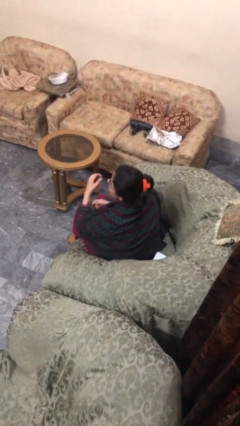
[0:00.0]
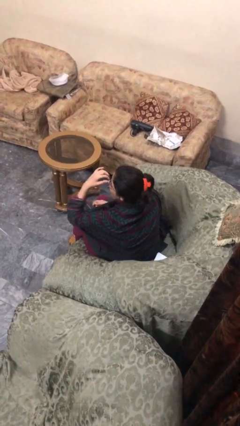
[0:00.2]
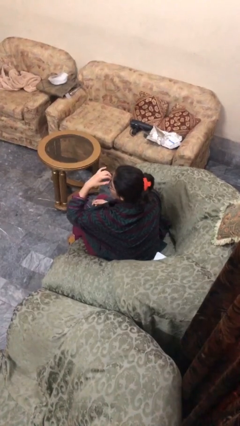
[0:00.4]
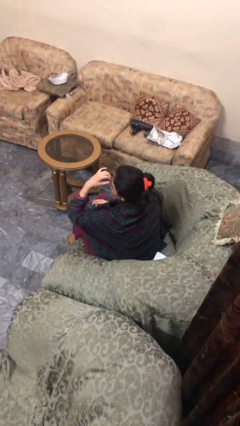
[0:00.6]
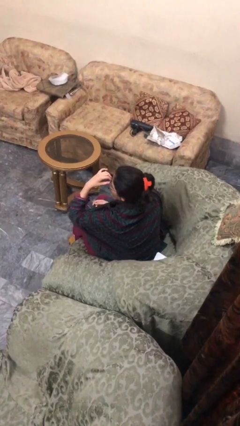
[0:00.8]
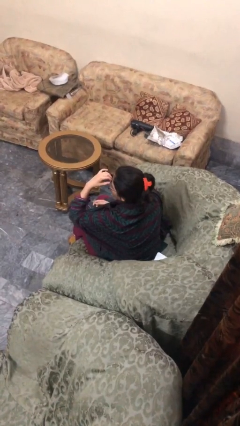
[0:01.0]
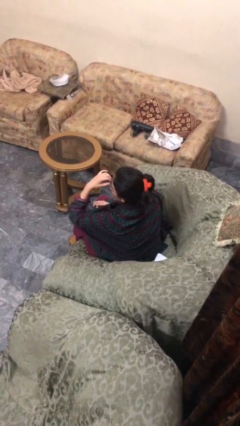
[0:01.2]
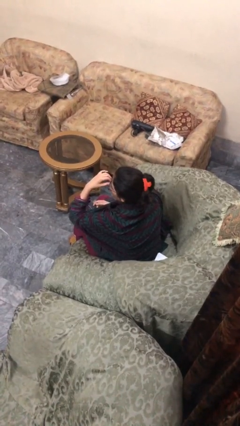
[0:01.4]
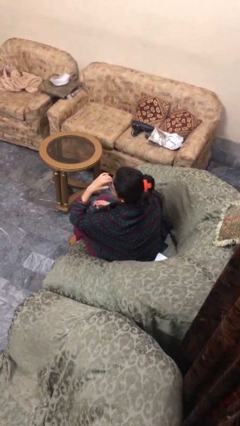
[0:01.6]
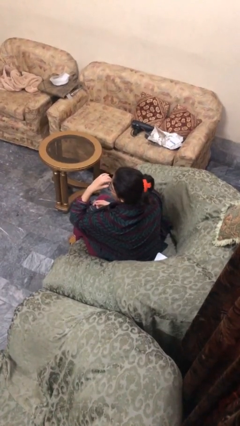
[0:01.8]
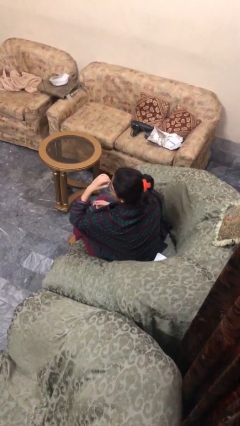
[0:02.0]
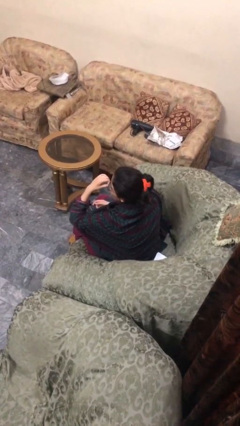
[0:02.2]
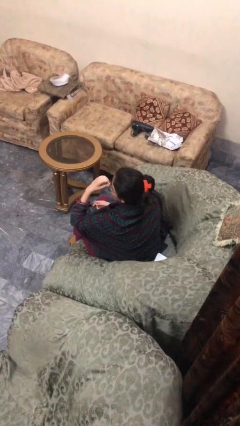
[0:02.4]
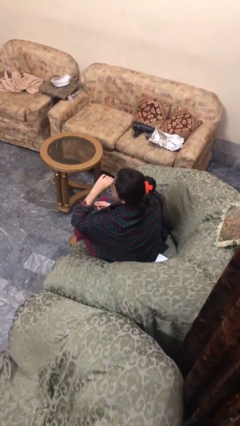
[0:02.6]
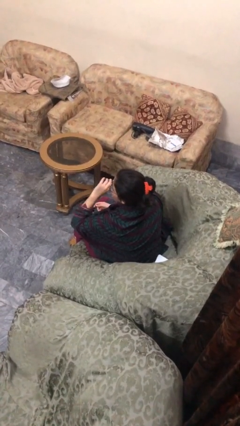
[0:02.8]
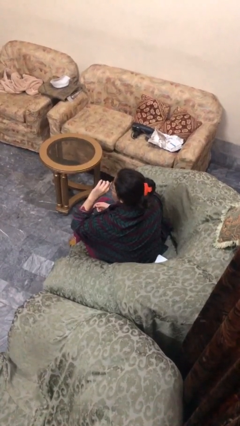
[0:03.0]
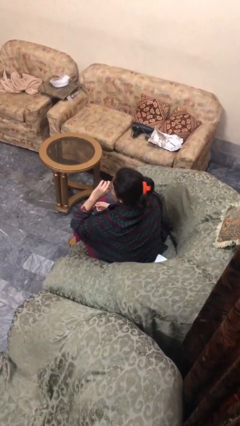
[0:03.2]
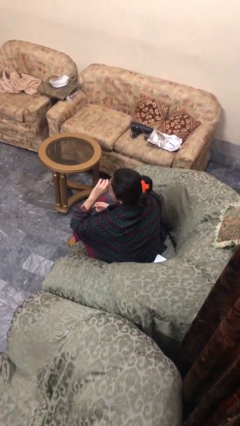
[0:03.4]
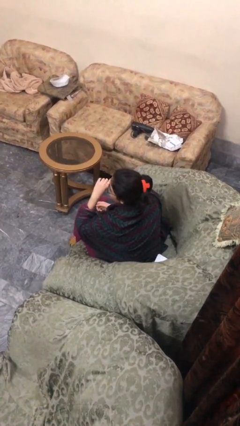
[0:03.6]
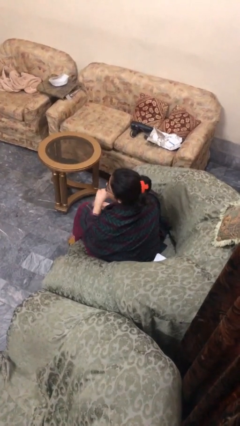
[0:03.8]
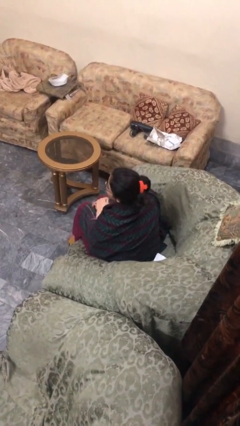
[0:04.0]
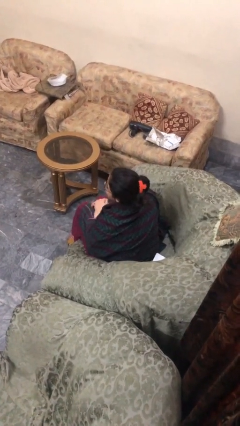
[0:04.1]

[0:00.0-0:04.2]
person blows nose

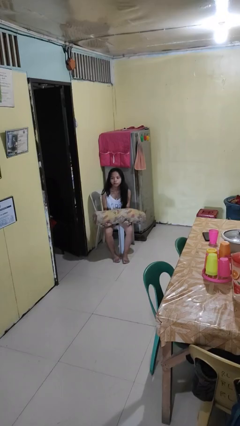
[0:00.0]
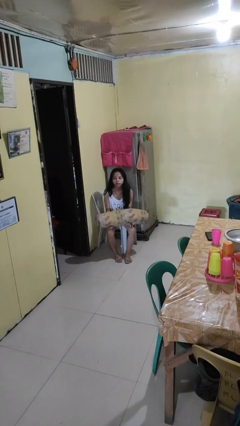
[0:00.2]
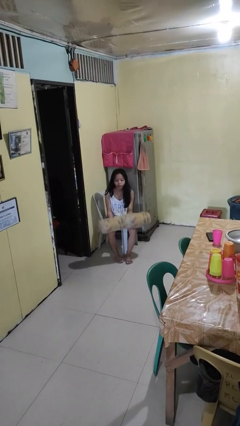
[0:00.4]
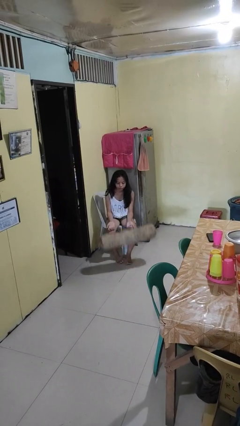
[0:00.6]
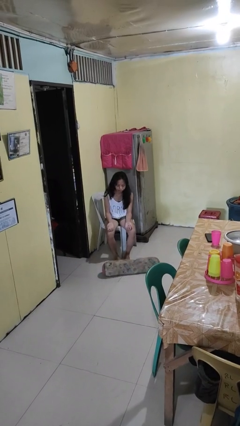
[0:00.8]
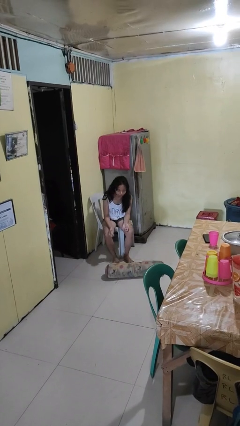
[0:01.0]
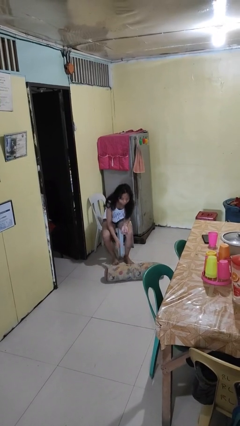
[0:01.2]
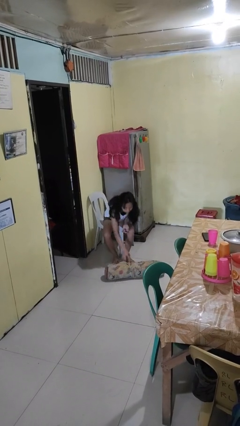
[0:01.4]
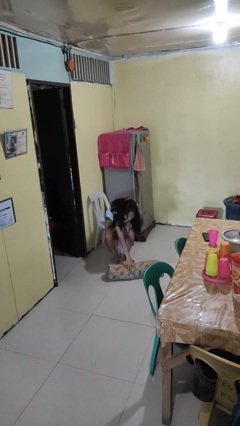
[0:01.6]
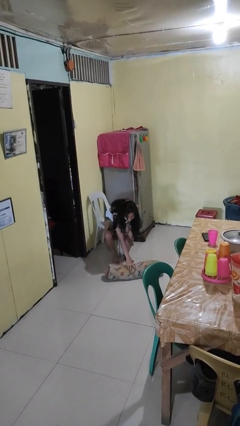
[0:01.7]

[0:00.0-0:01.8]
person drops object

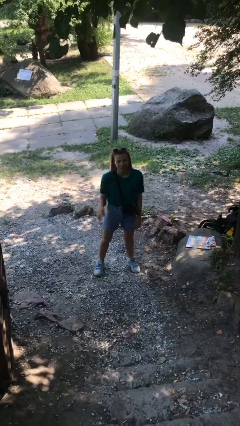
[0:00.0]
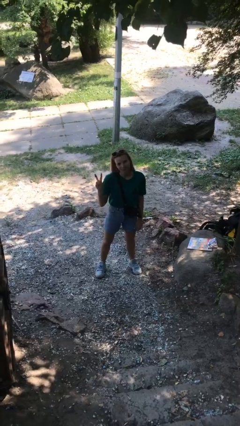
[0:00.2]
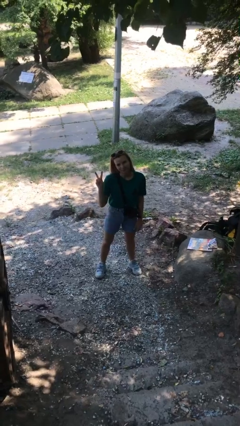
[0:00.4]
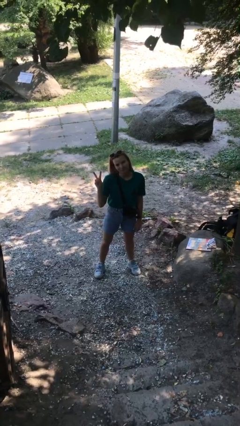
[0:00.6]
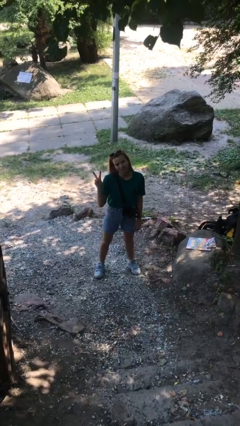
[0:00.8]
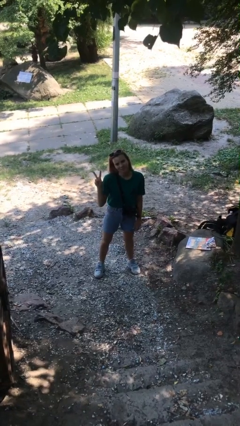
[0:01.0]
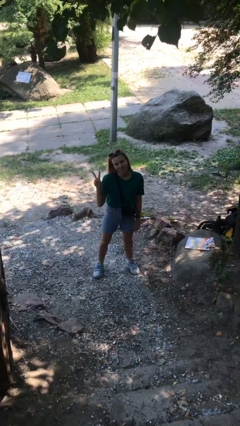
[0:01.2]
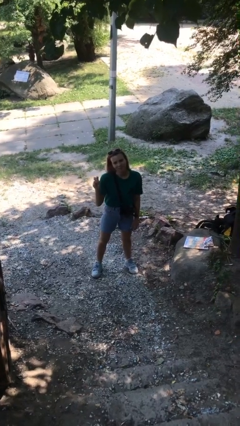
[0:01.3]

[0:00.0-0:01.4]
person gestures peace

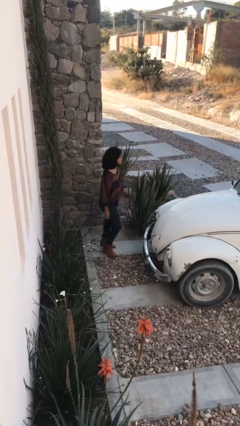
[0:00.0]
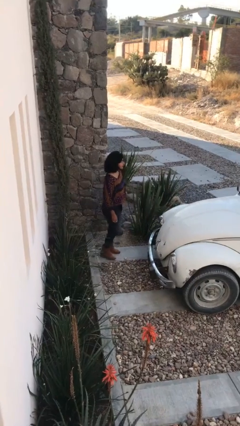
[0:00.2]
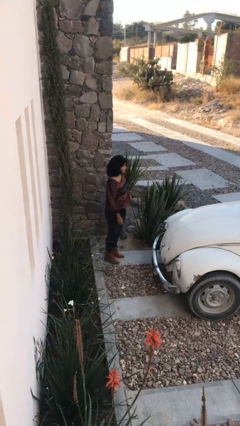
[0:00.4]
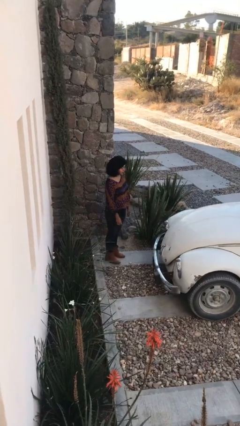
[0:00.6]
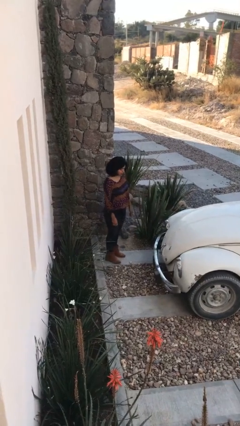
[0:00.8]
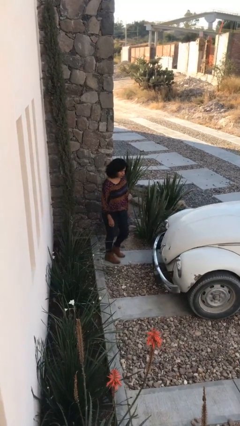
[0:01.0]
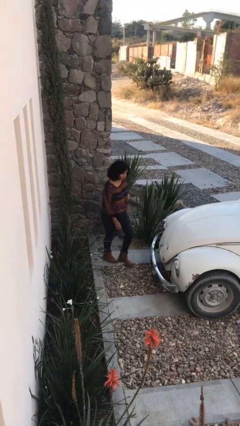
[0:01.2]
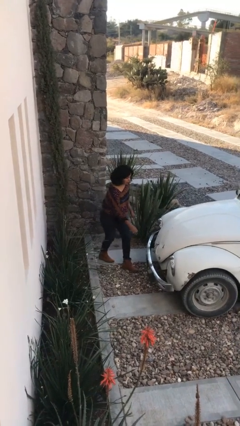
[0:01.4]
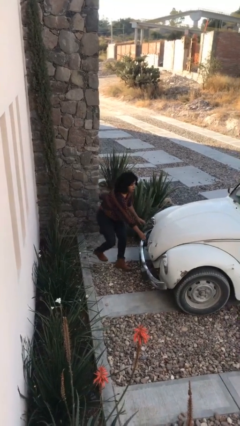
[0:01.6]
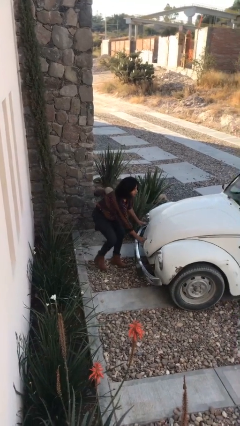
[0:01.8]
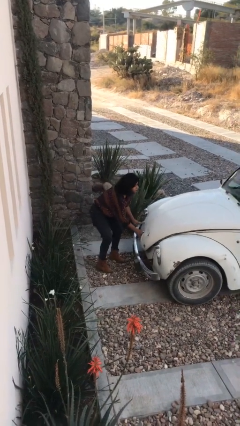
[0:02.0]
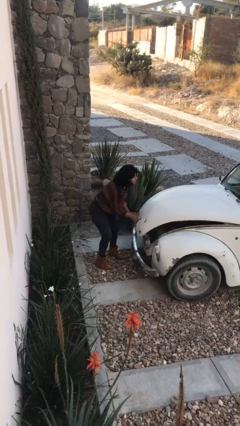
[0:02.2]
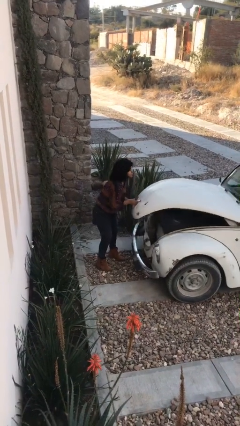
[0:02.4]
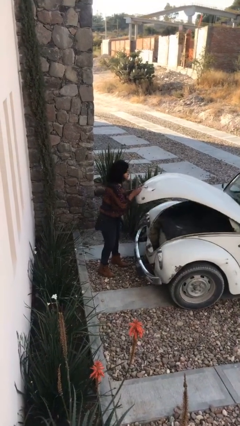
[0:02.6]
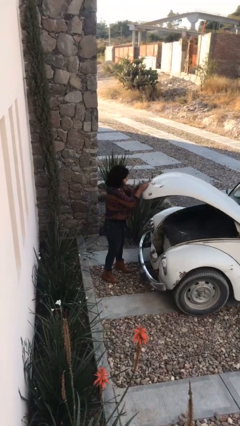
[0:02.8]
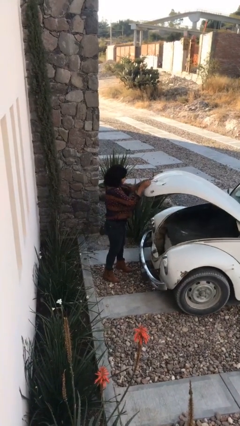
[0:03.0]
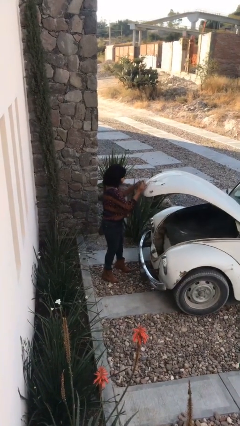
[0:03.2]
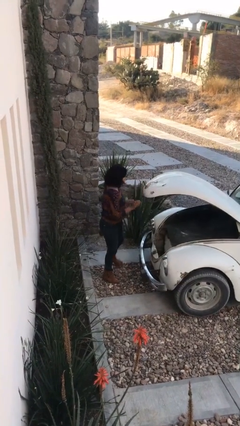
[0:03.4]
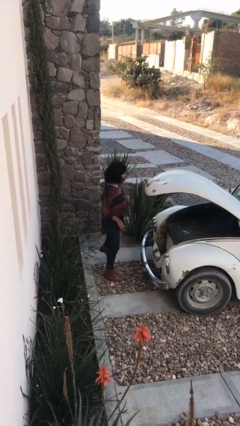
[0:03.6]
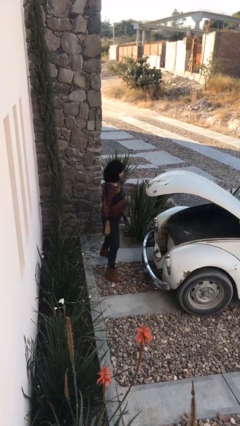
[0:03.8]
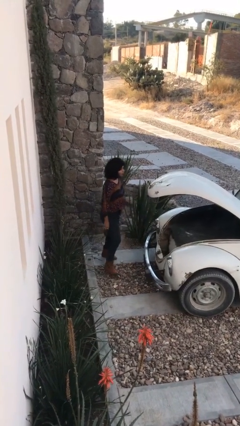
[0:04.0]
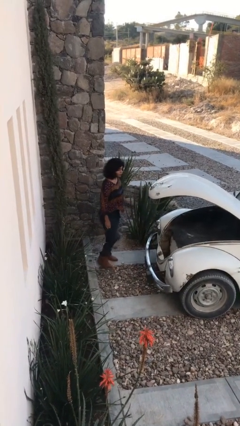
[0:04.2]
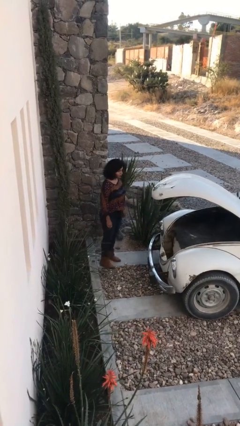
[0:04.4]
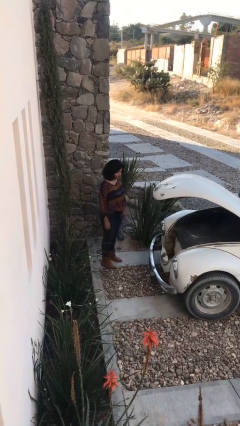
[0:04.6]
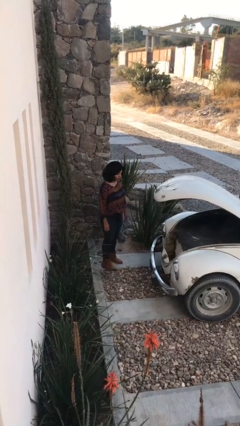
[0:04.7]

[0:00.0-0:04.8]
person opens car trunk

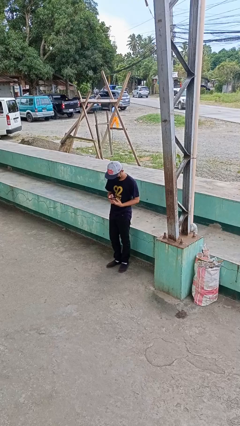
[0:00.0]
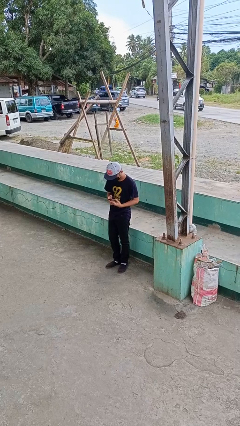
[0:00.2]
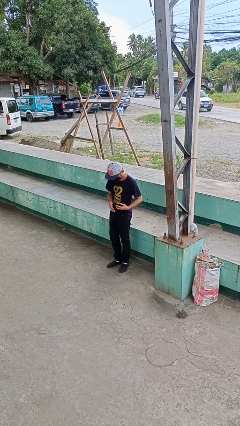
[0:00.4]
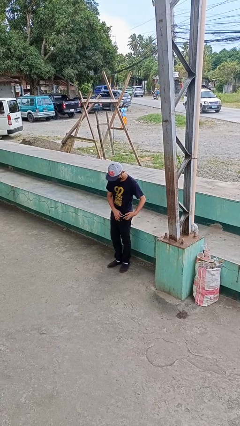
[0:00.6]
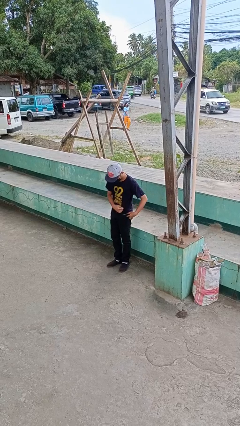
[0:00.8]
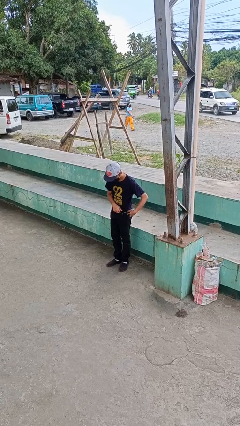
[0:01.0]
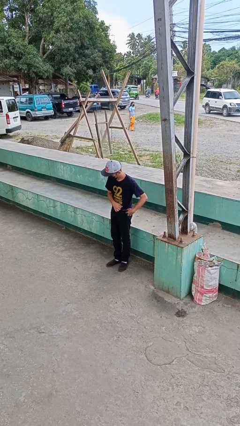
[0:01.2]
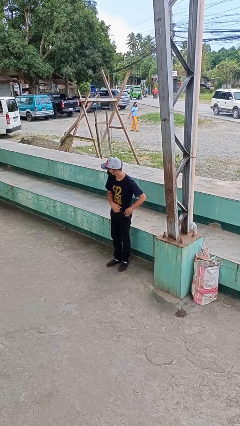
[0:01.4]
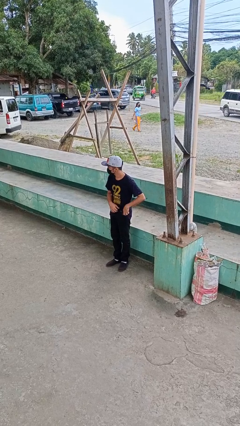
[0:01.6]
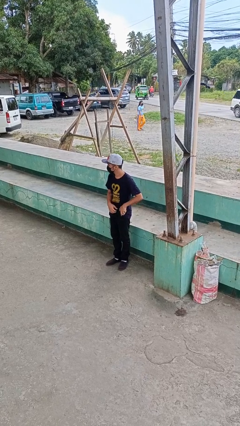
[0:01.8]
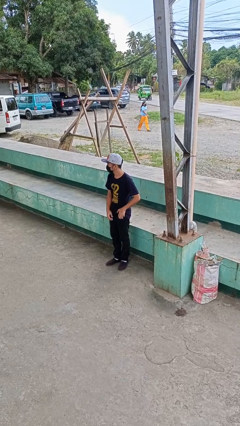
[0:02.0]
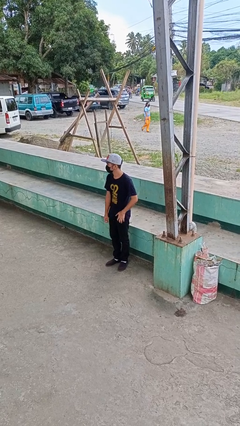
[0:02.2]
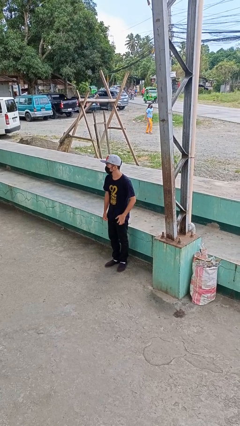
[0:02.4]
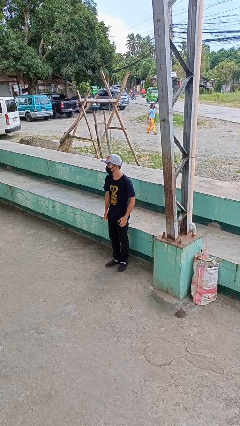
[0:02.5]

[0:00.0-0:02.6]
person puts phone into pocket

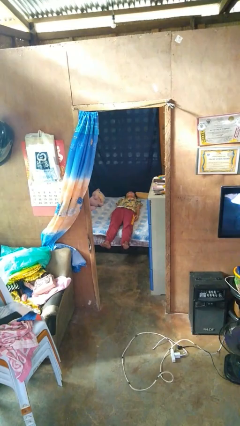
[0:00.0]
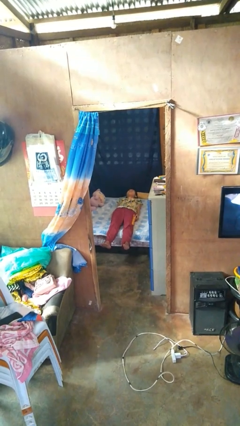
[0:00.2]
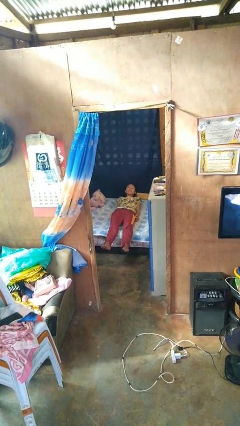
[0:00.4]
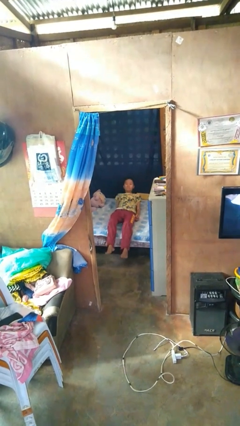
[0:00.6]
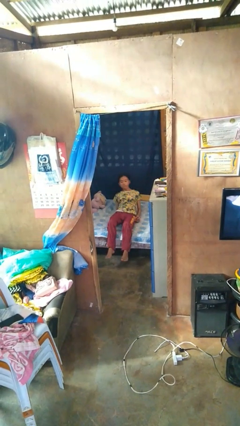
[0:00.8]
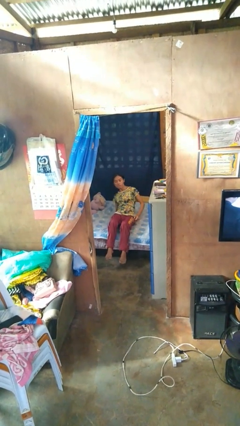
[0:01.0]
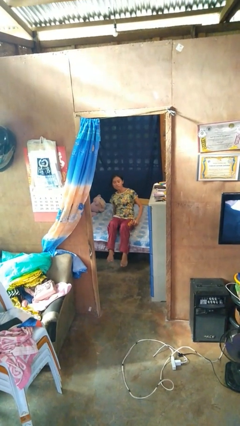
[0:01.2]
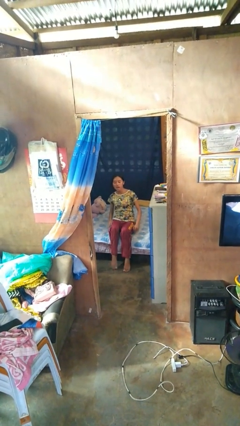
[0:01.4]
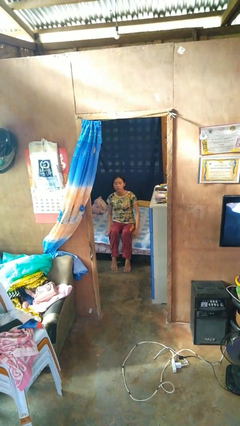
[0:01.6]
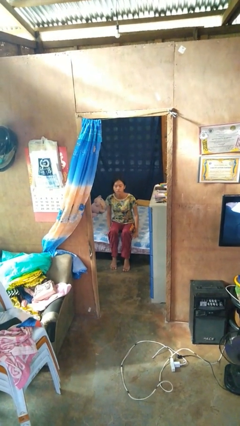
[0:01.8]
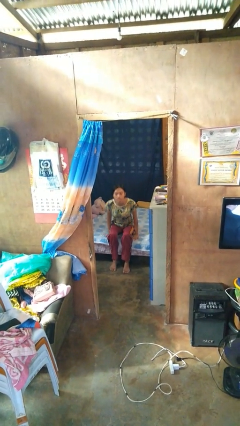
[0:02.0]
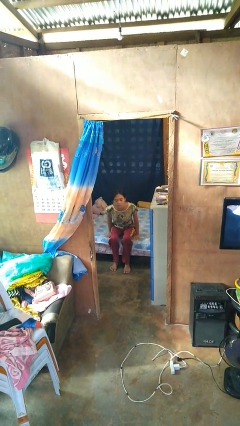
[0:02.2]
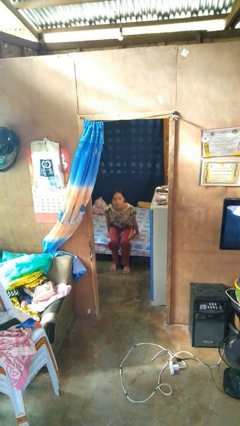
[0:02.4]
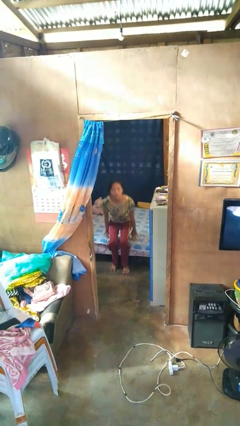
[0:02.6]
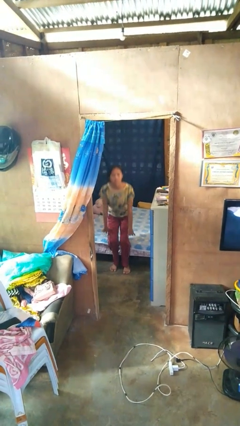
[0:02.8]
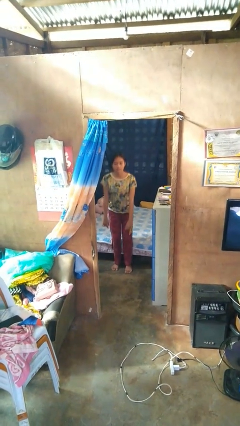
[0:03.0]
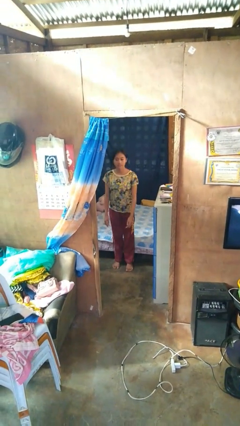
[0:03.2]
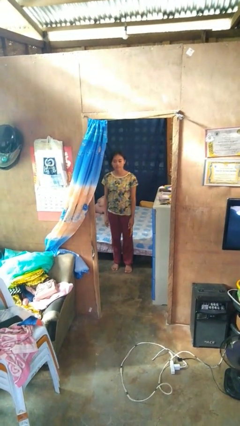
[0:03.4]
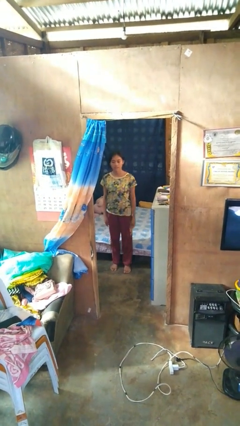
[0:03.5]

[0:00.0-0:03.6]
person stands up
